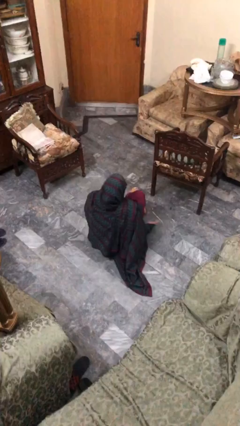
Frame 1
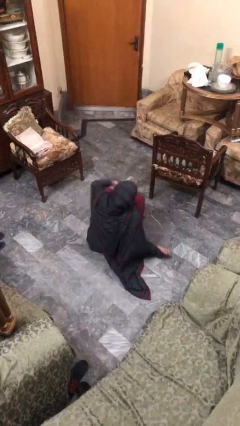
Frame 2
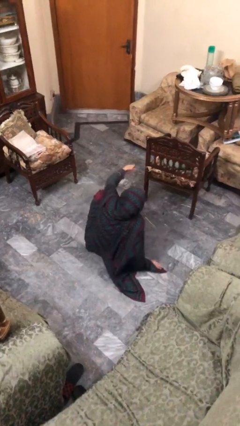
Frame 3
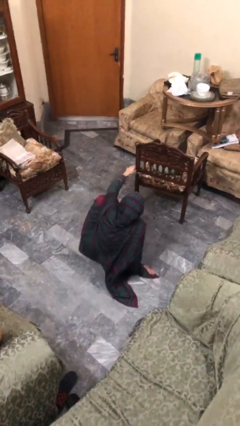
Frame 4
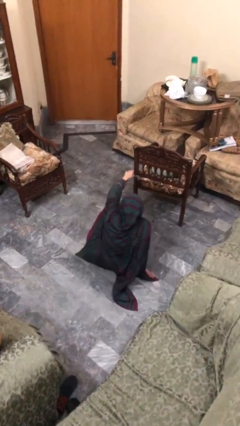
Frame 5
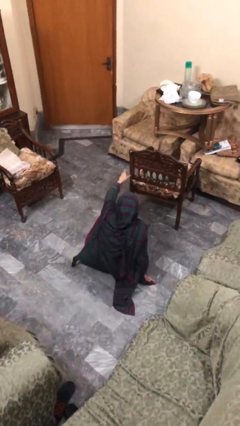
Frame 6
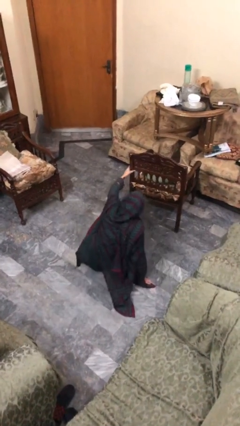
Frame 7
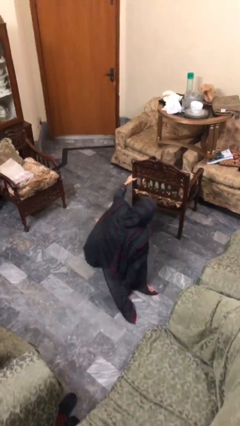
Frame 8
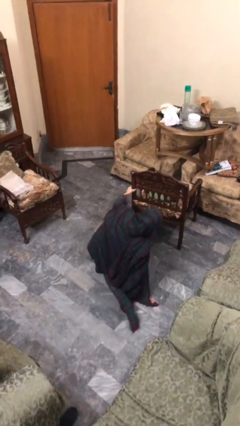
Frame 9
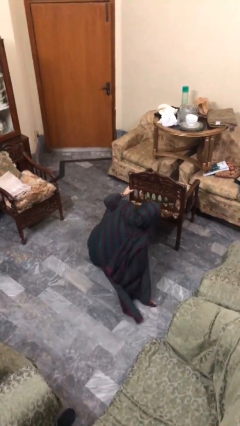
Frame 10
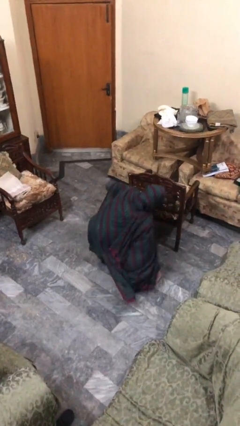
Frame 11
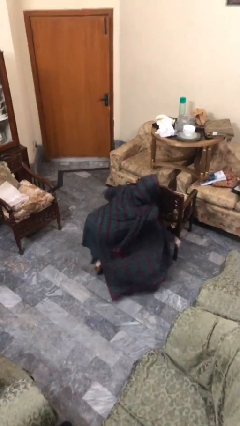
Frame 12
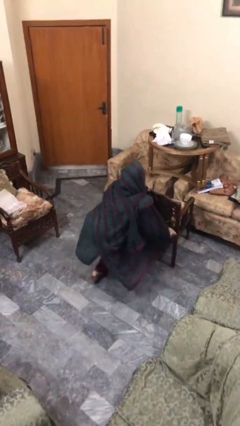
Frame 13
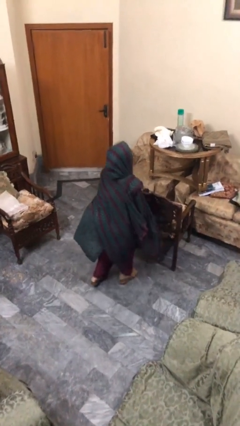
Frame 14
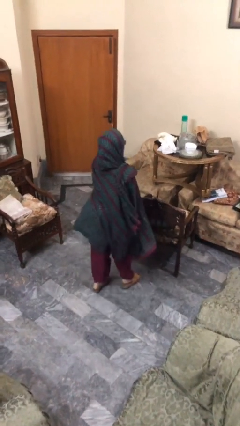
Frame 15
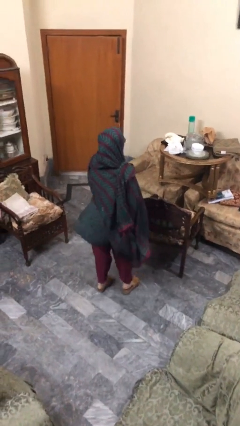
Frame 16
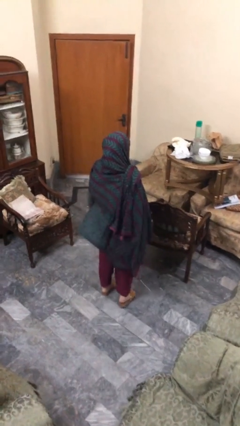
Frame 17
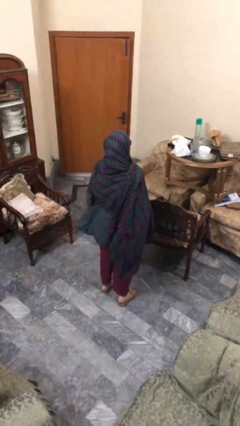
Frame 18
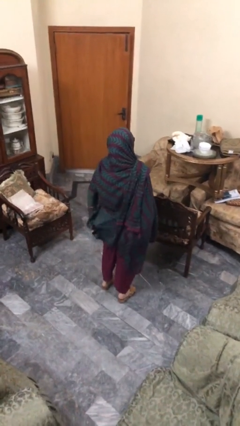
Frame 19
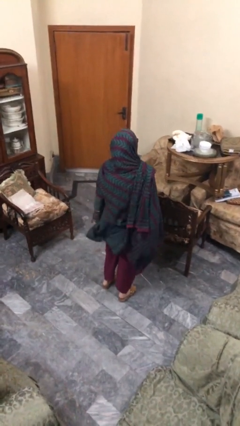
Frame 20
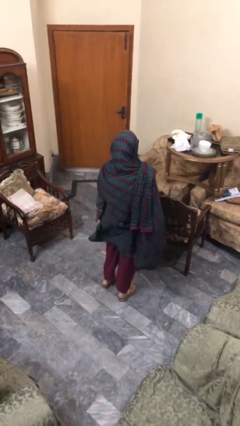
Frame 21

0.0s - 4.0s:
person stands up from floor

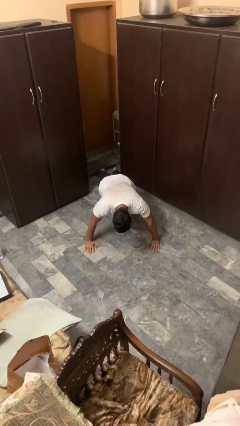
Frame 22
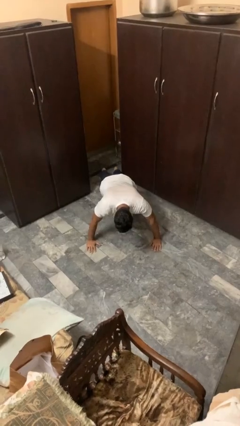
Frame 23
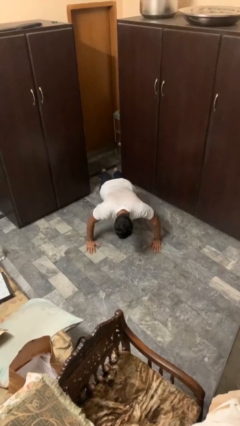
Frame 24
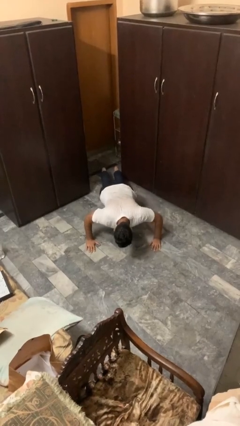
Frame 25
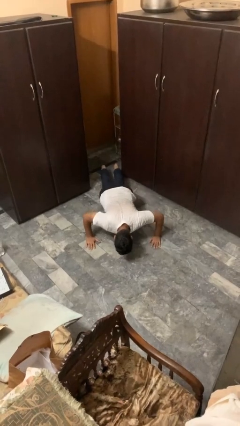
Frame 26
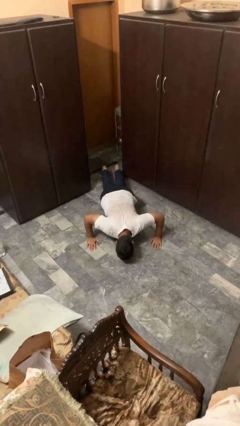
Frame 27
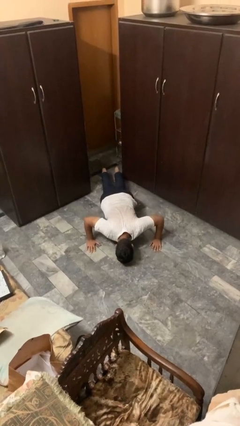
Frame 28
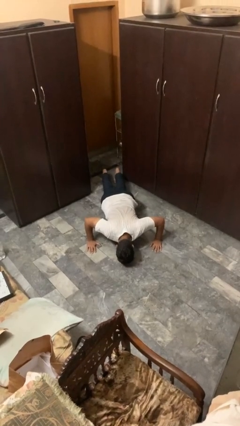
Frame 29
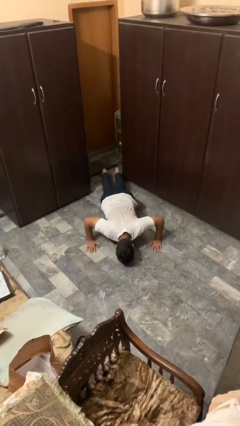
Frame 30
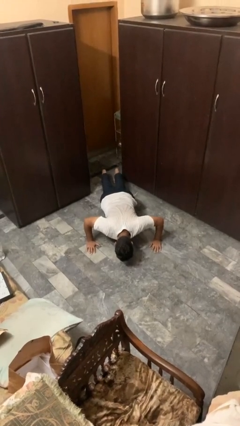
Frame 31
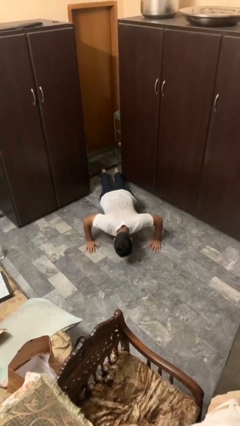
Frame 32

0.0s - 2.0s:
person exercises with pushup

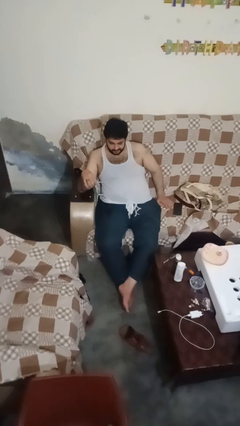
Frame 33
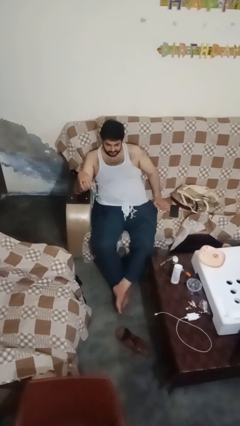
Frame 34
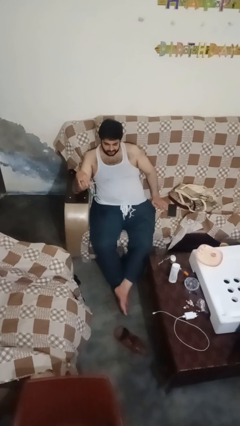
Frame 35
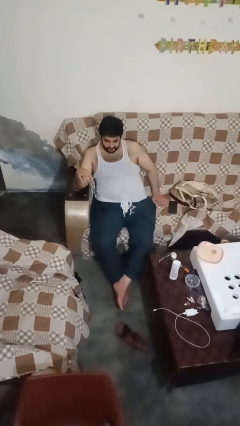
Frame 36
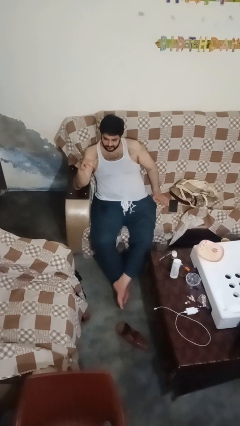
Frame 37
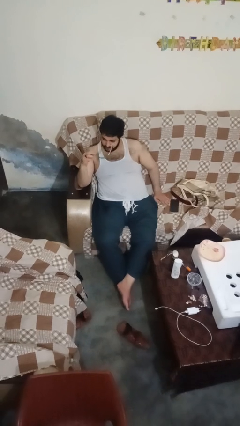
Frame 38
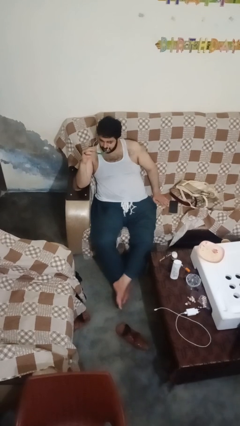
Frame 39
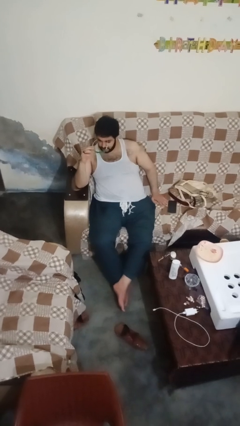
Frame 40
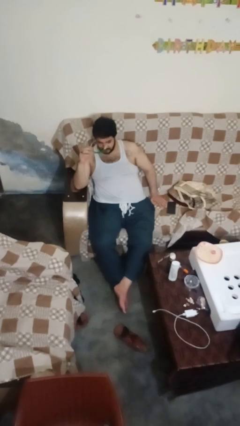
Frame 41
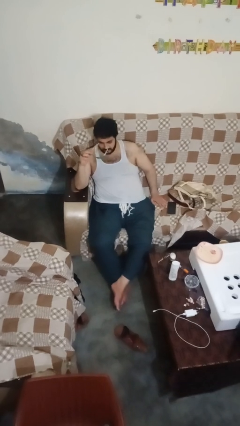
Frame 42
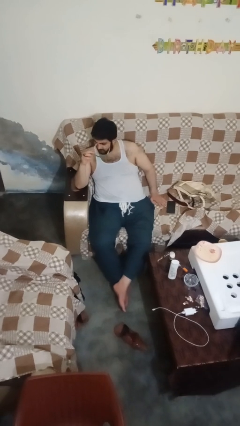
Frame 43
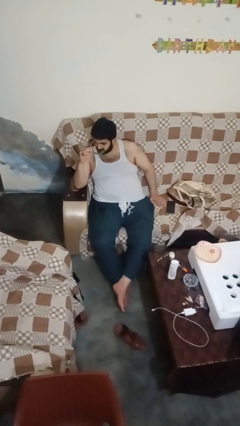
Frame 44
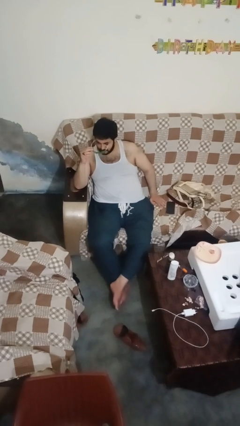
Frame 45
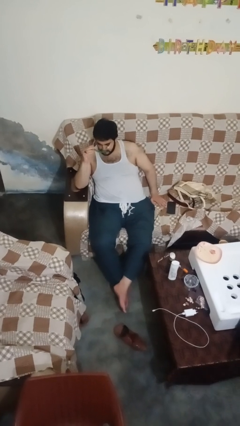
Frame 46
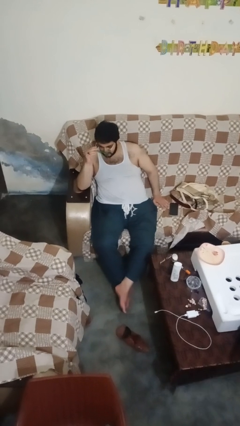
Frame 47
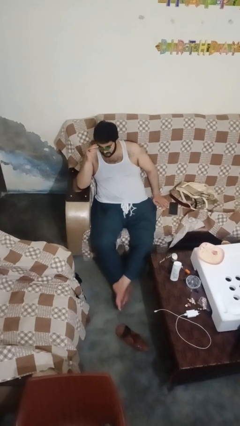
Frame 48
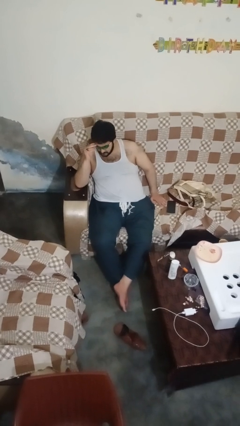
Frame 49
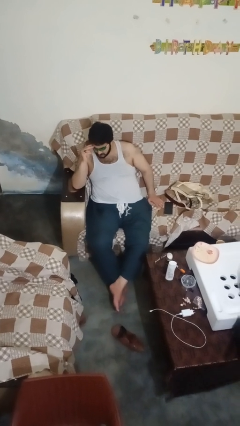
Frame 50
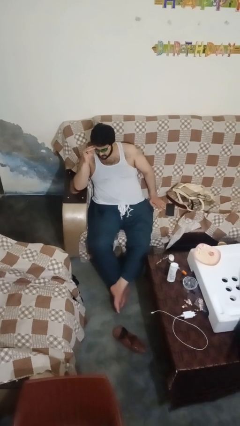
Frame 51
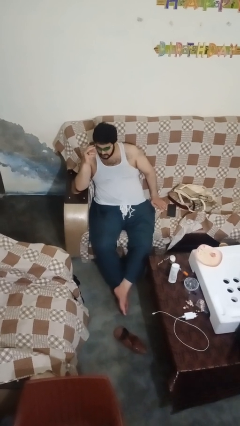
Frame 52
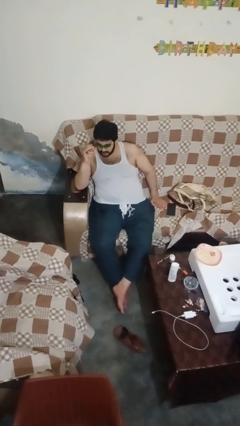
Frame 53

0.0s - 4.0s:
person puts on sunglasses

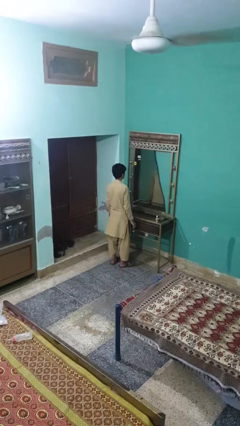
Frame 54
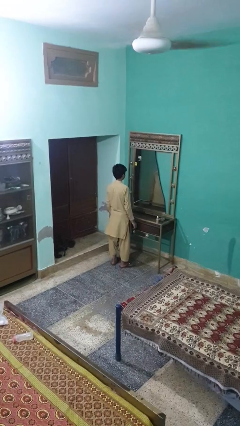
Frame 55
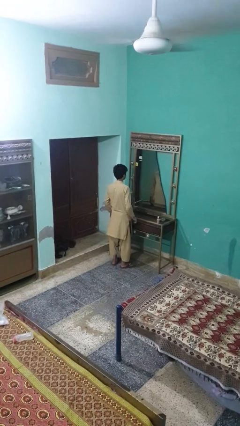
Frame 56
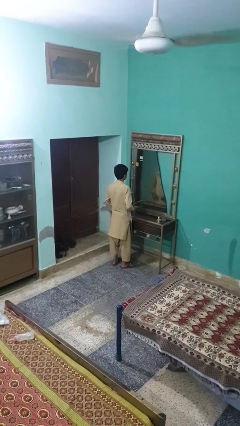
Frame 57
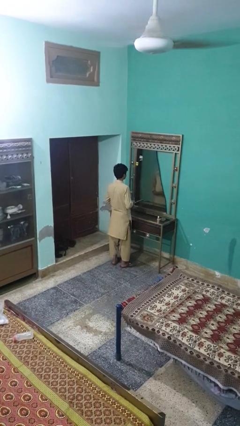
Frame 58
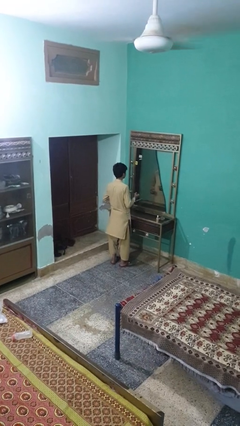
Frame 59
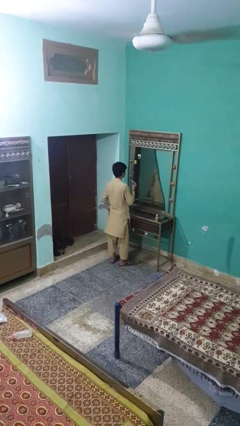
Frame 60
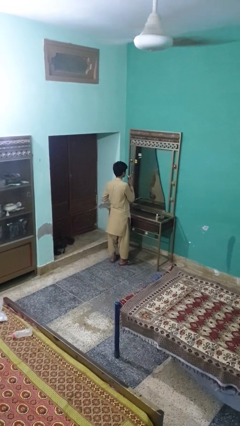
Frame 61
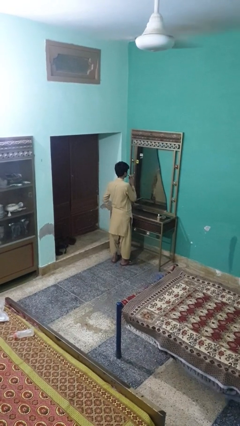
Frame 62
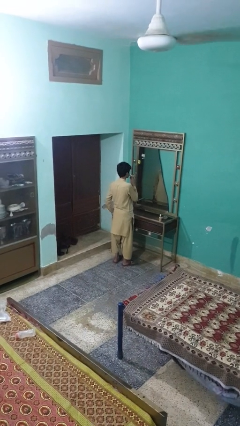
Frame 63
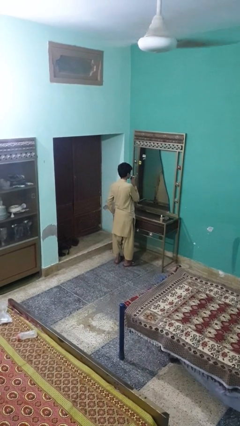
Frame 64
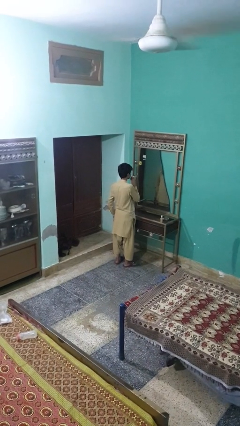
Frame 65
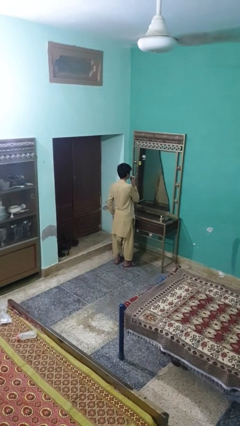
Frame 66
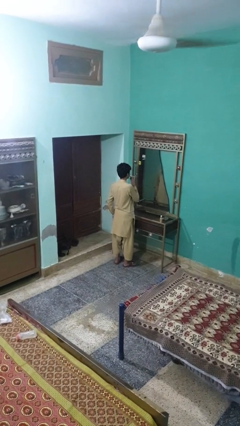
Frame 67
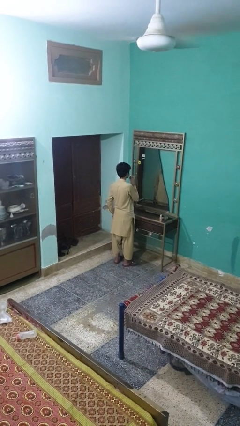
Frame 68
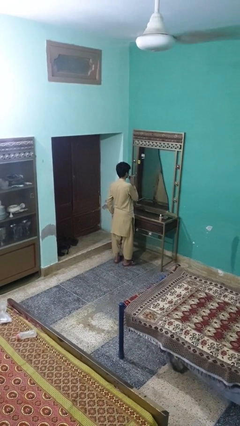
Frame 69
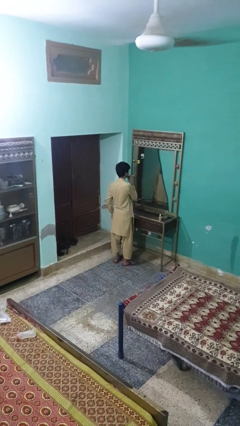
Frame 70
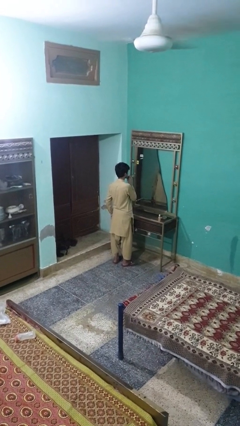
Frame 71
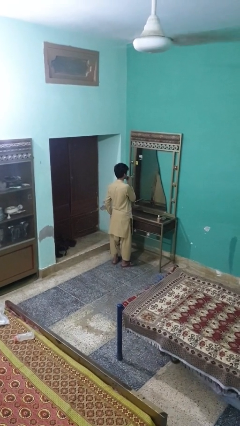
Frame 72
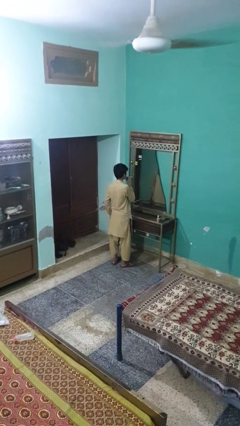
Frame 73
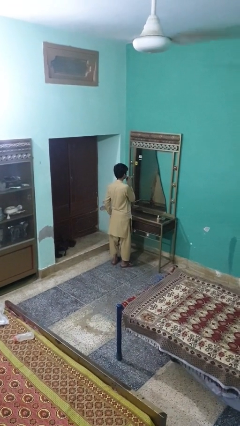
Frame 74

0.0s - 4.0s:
person applies lip makeup

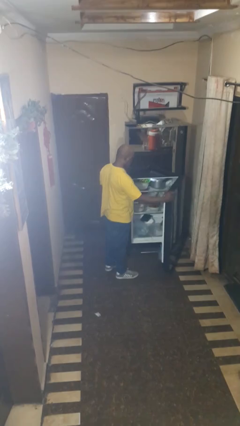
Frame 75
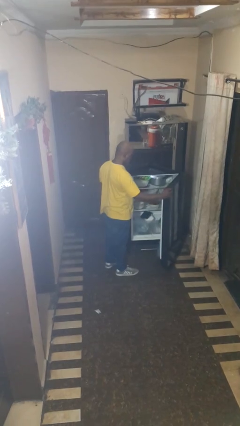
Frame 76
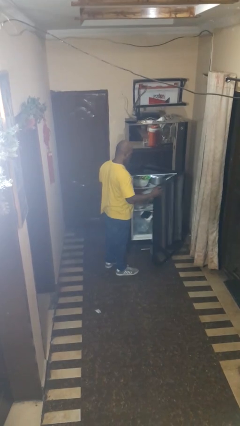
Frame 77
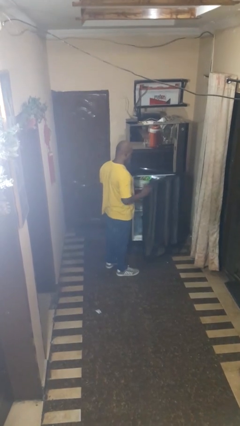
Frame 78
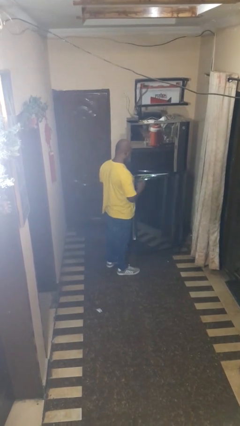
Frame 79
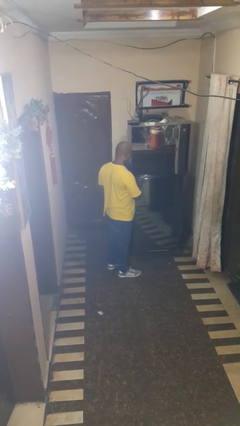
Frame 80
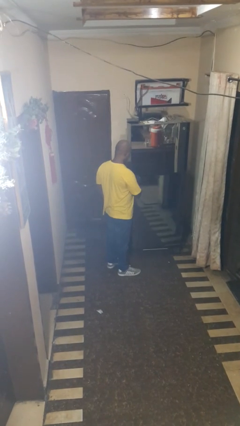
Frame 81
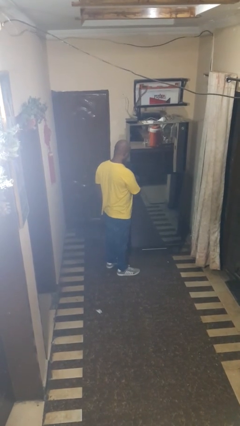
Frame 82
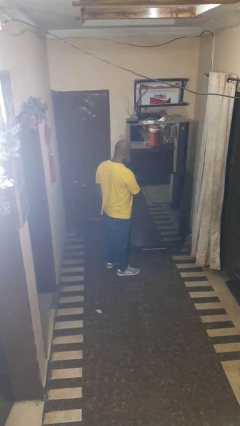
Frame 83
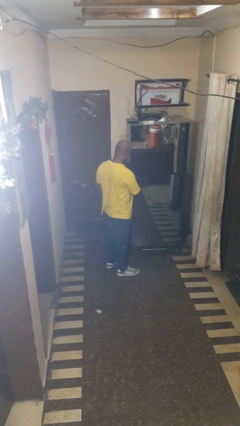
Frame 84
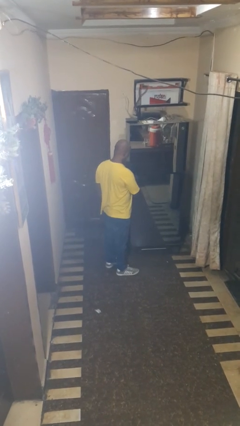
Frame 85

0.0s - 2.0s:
person closes refrigerator

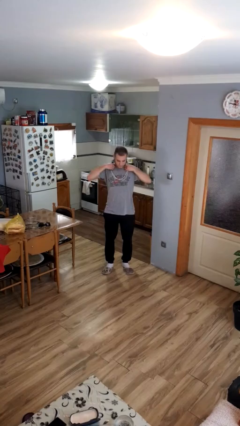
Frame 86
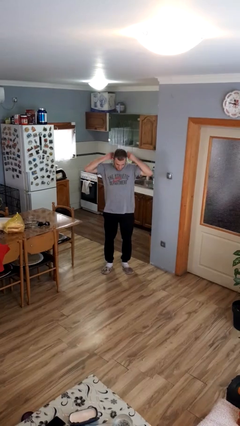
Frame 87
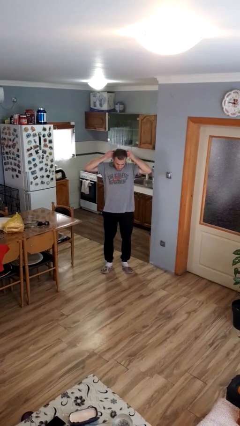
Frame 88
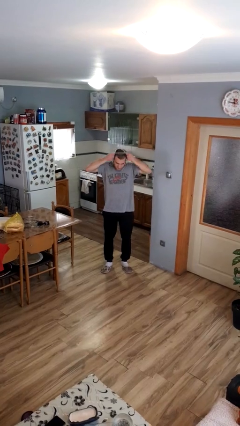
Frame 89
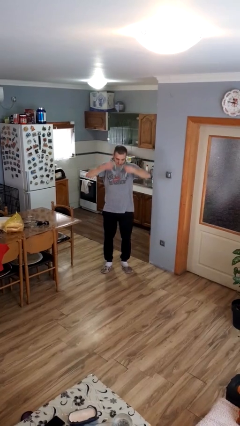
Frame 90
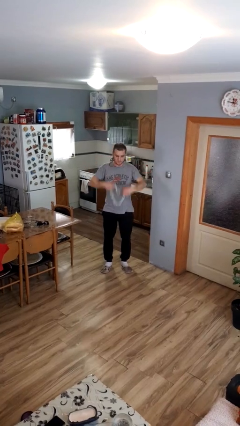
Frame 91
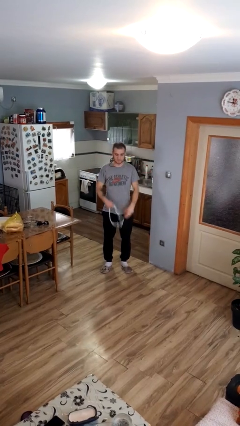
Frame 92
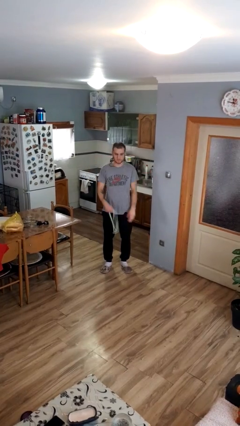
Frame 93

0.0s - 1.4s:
person takes off necklace
